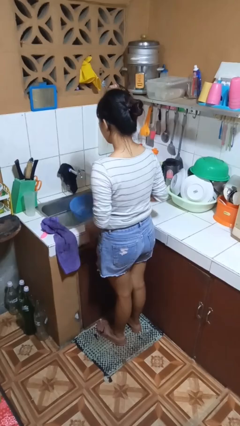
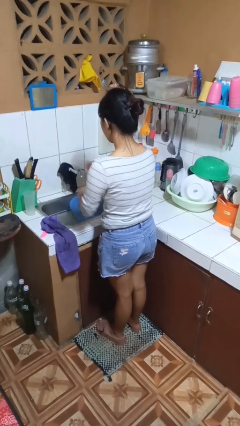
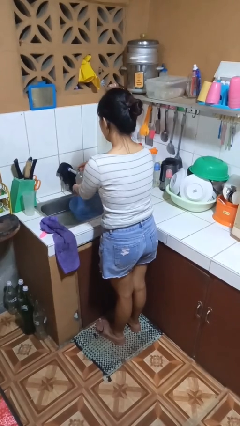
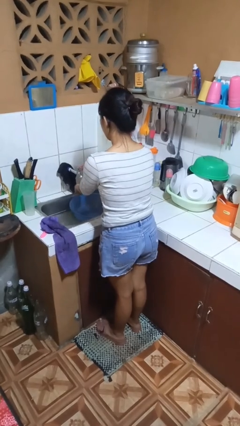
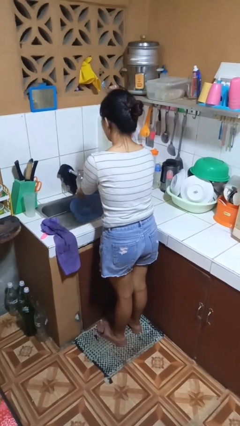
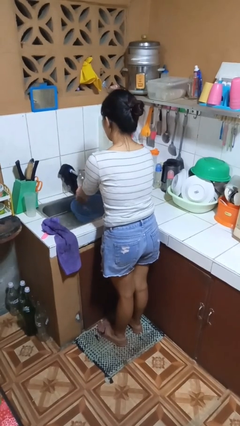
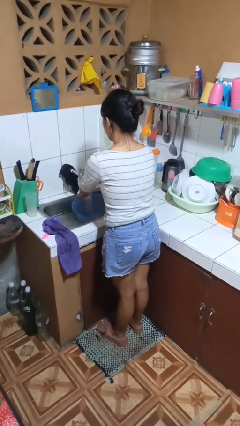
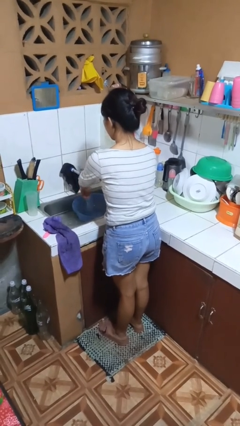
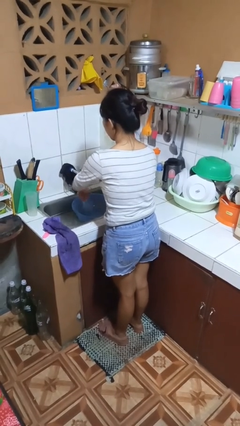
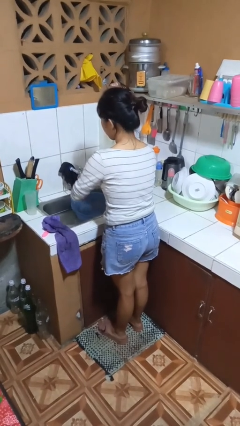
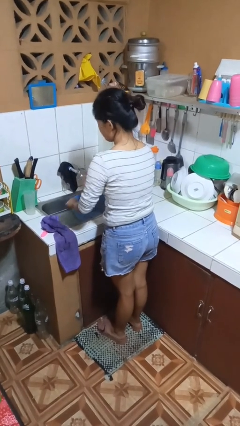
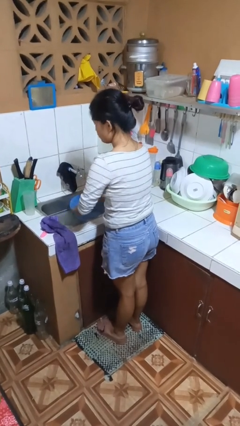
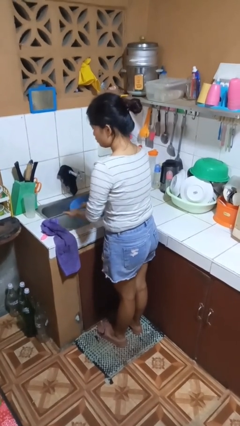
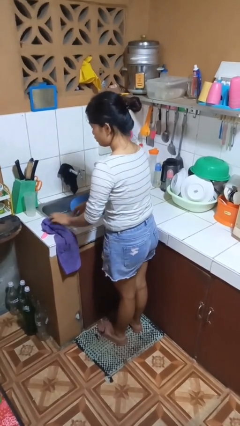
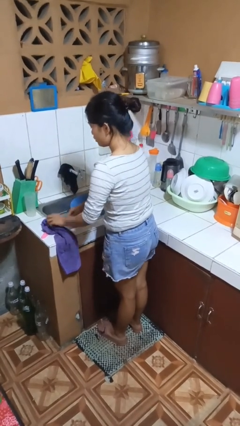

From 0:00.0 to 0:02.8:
person washes hands

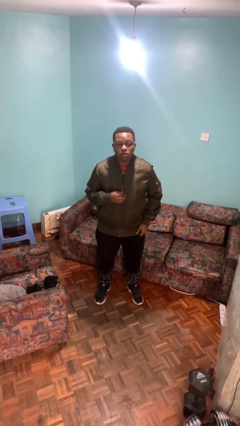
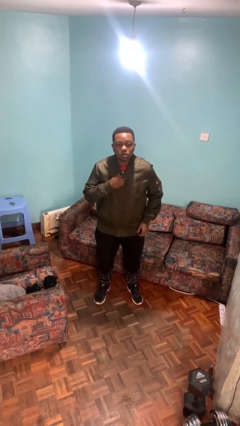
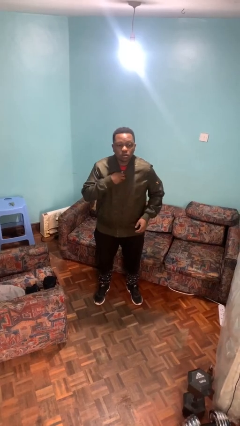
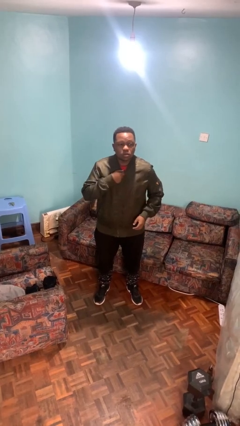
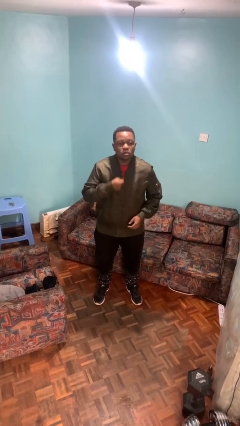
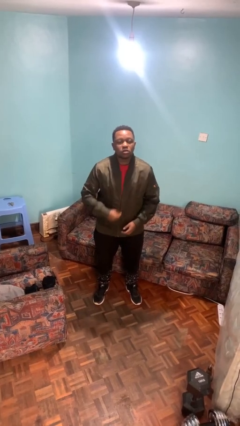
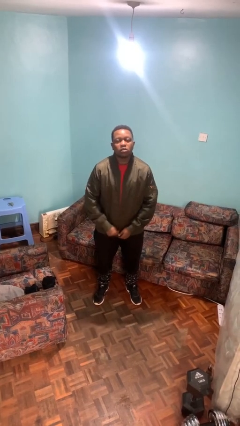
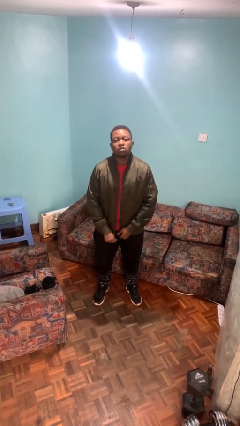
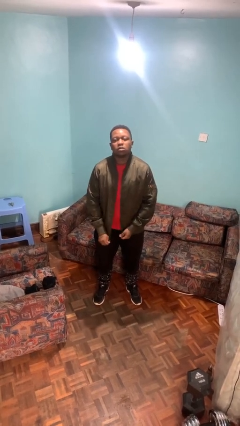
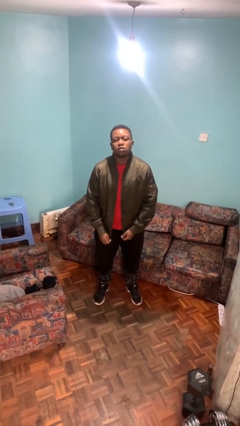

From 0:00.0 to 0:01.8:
person unzips jacket

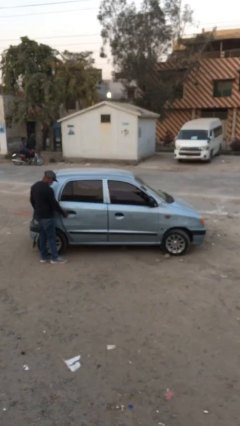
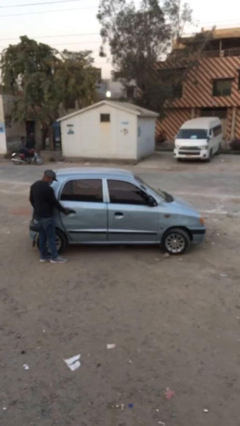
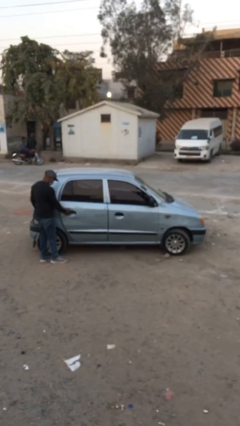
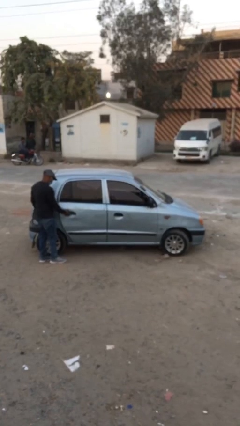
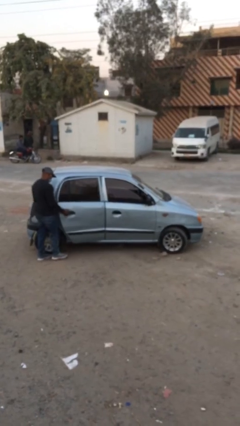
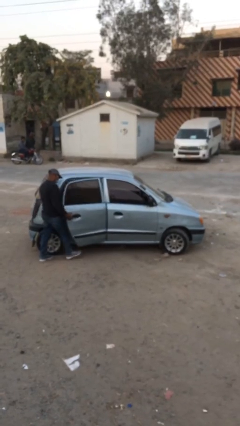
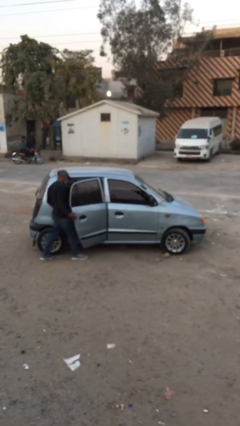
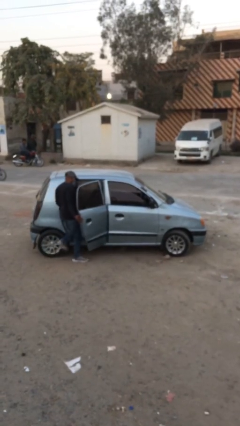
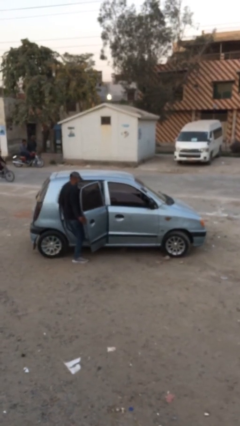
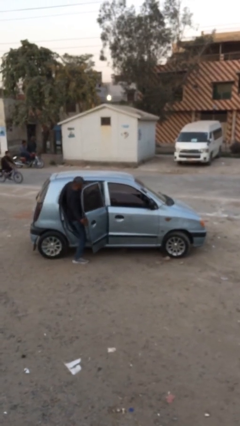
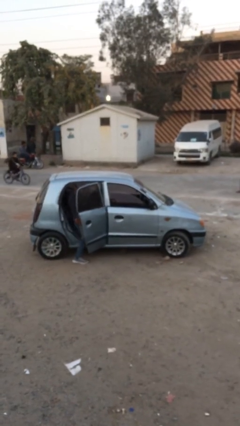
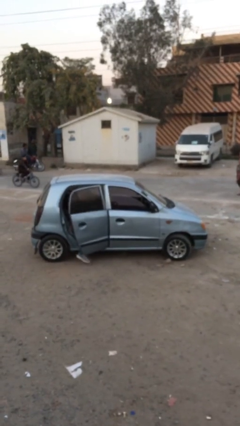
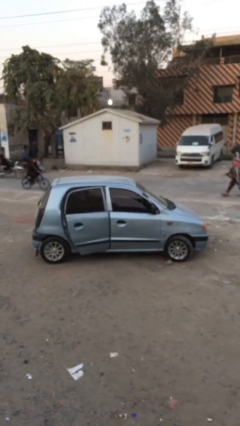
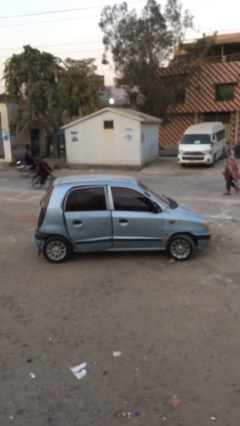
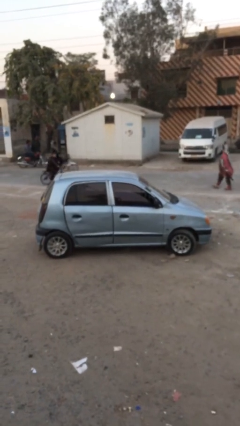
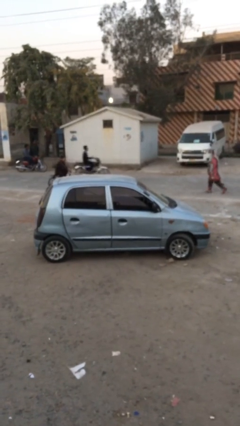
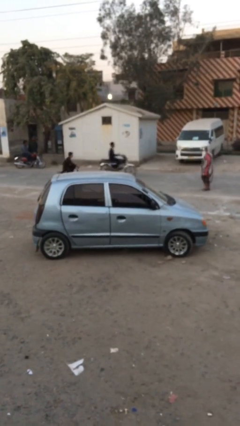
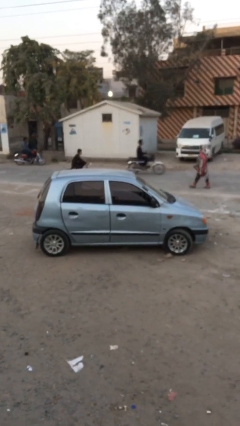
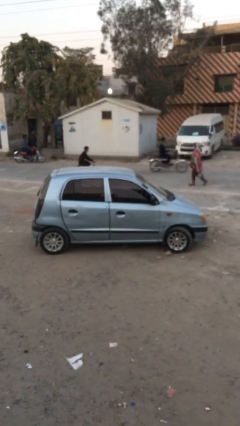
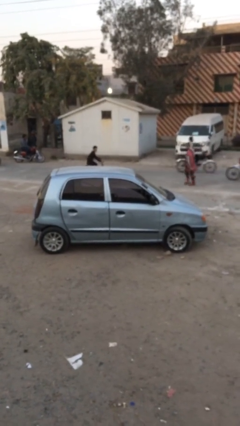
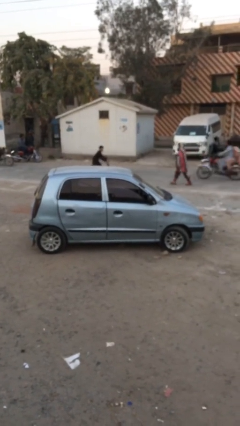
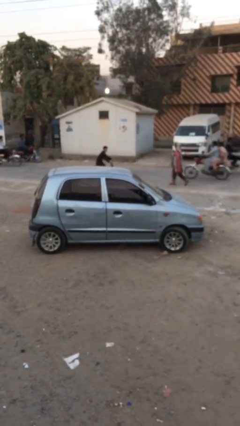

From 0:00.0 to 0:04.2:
car picks up person

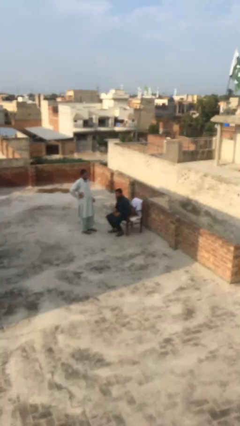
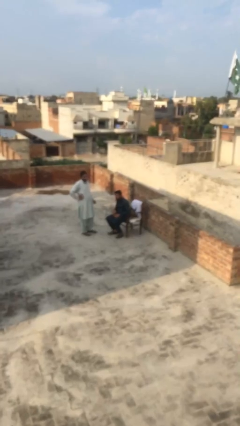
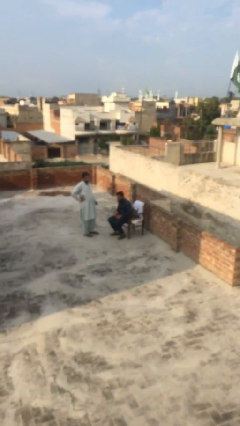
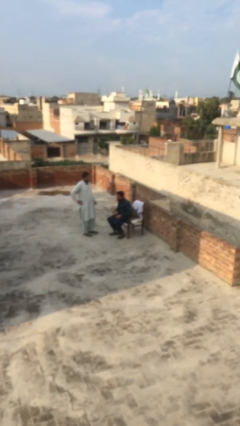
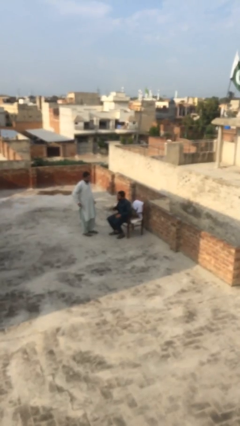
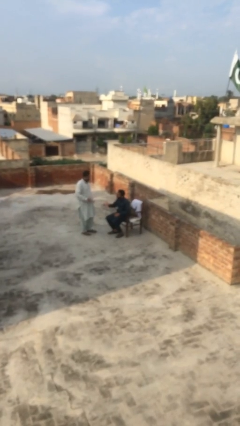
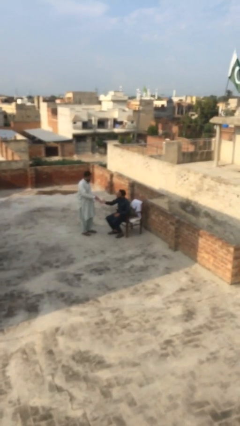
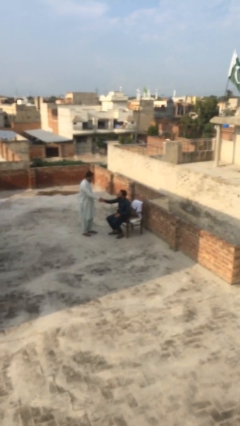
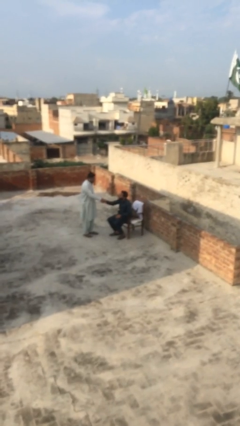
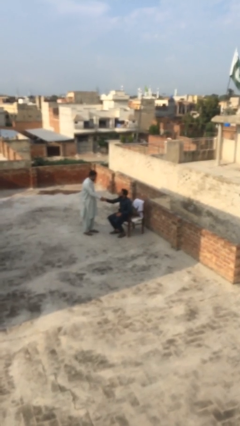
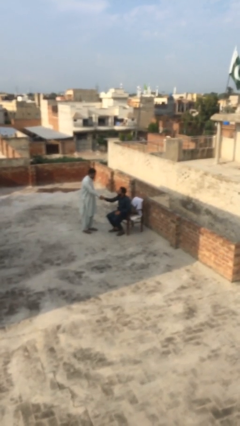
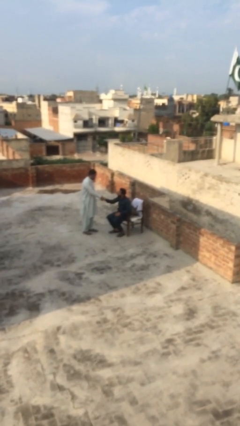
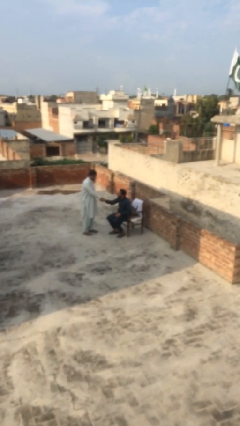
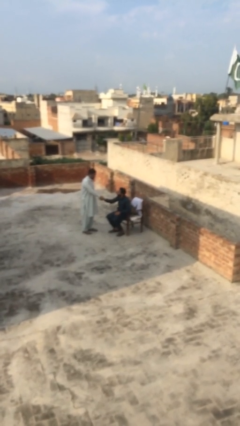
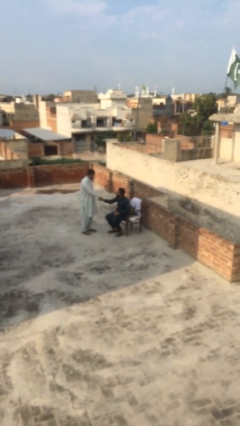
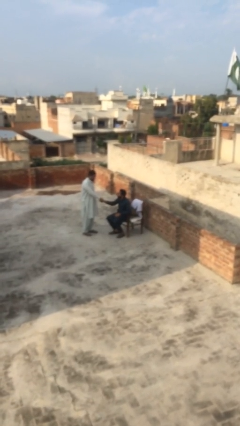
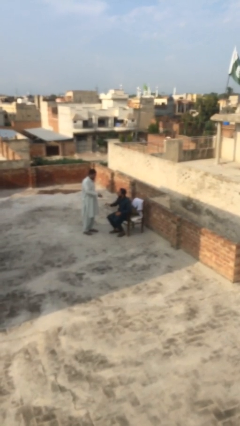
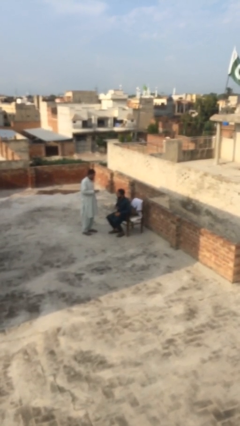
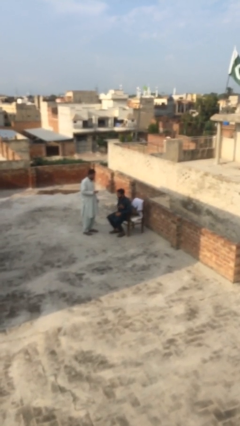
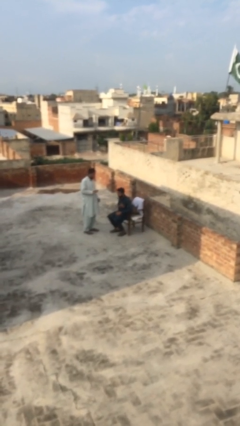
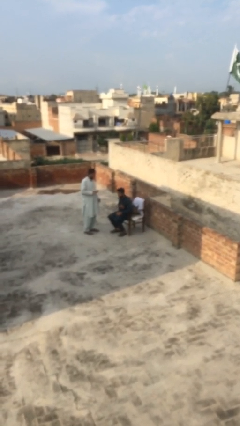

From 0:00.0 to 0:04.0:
person shakes hand

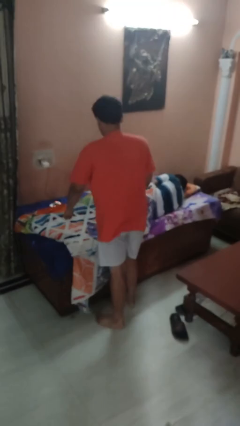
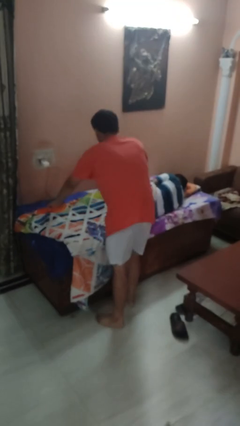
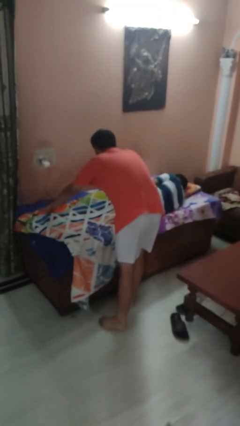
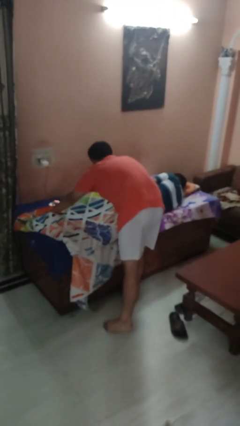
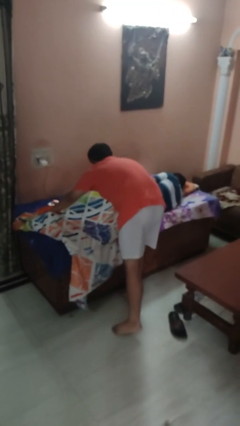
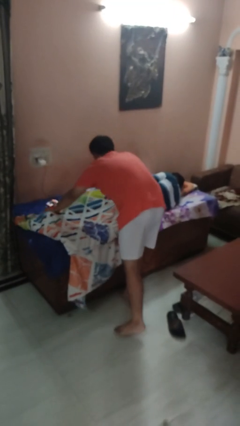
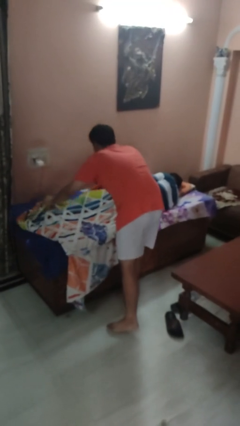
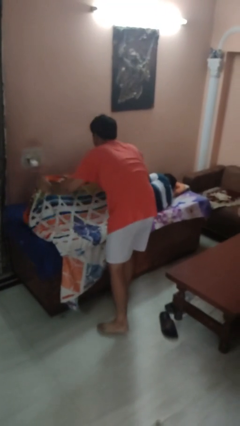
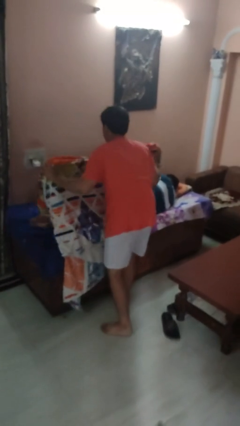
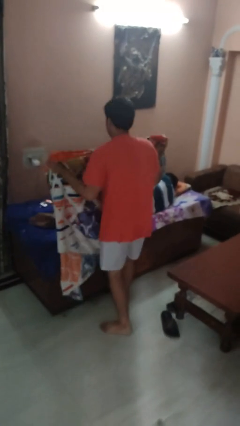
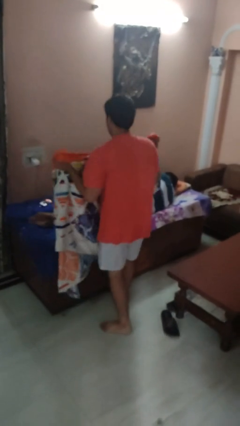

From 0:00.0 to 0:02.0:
person uncovers friend with blanket

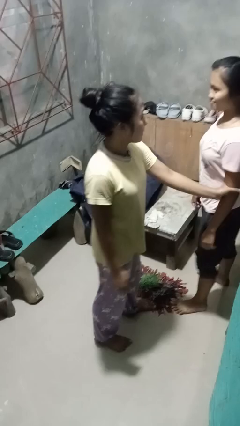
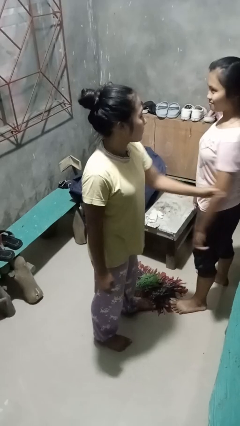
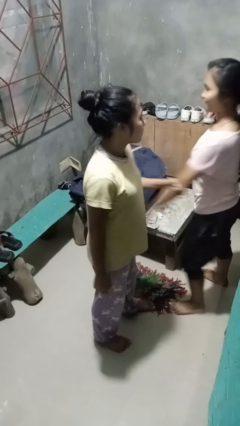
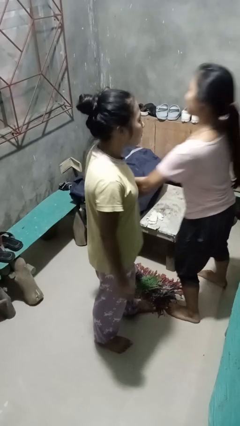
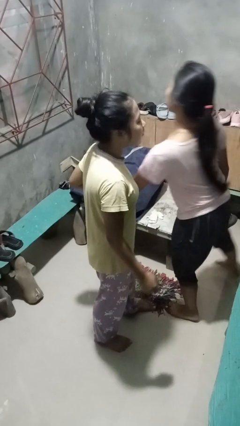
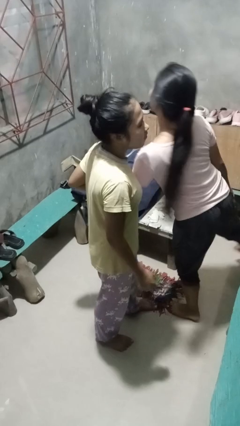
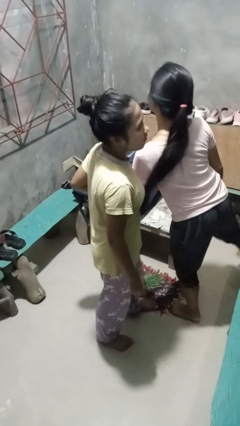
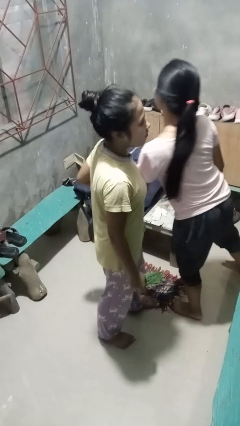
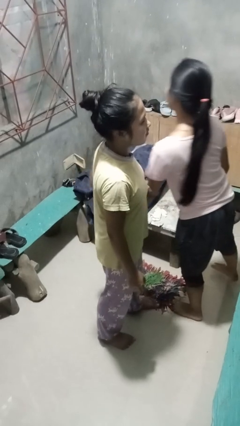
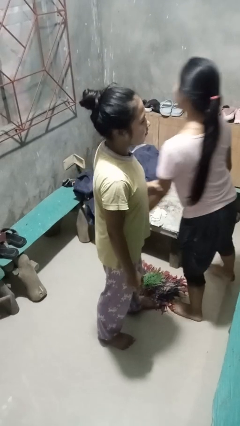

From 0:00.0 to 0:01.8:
person grabs person by forearm

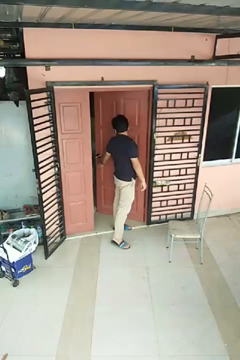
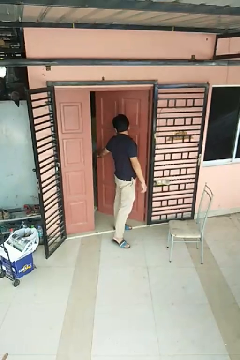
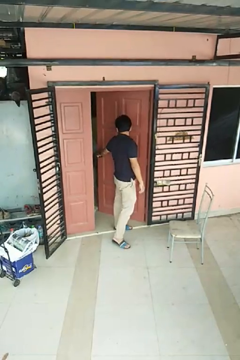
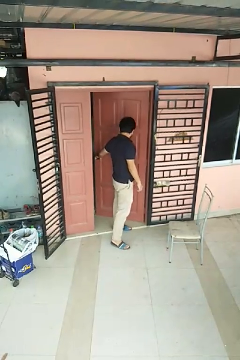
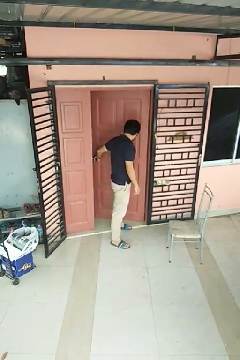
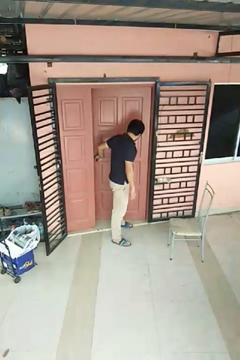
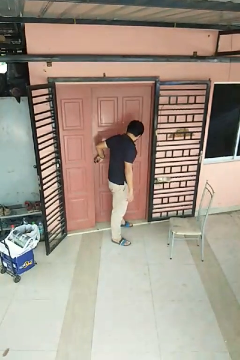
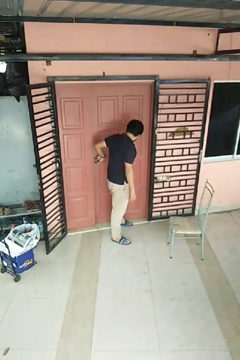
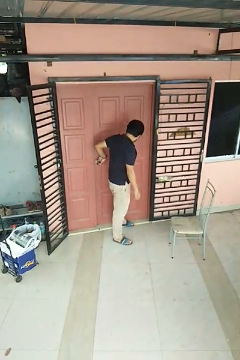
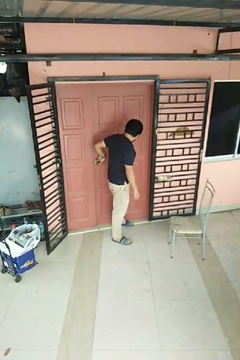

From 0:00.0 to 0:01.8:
person closes door with hip
